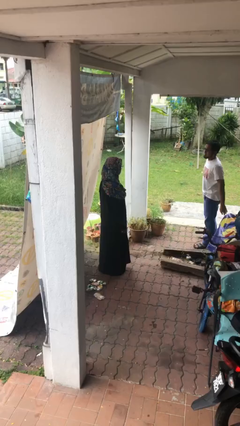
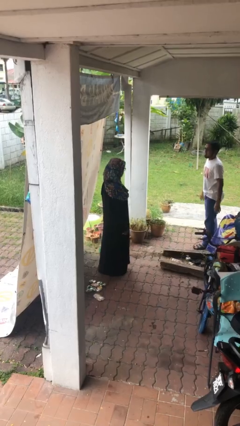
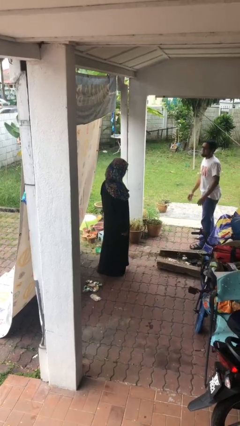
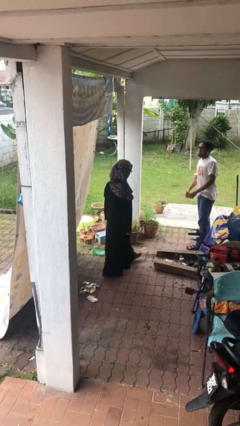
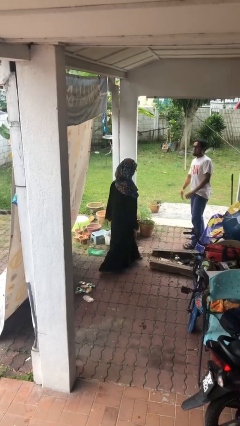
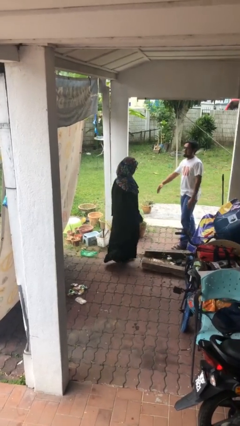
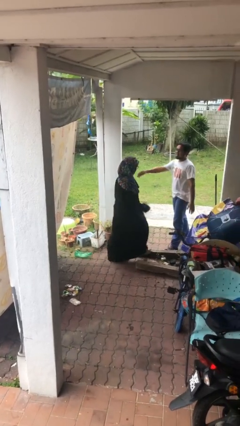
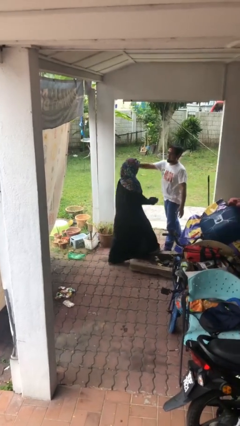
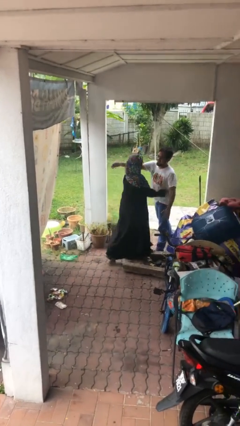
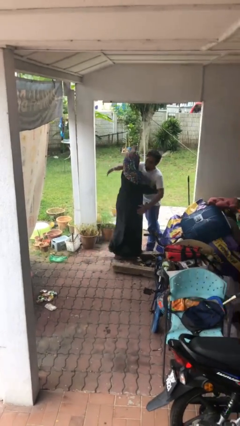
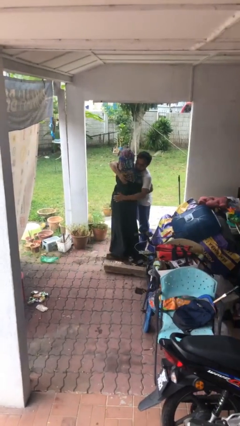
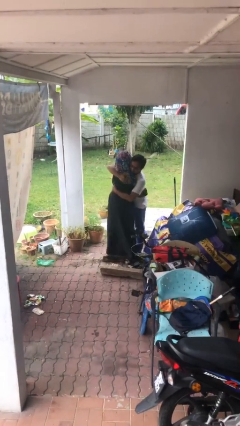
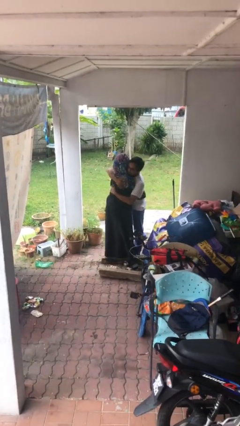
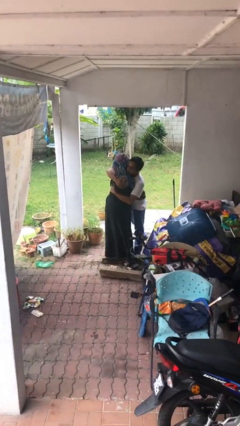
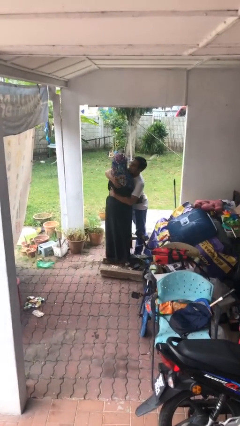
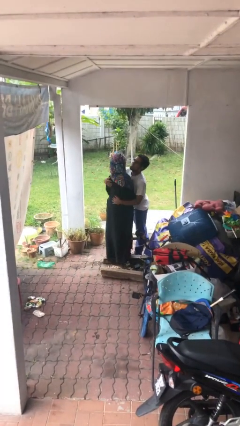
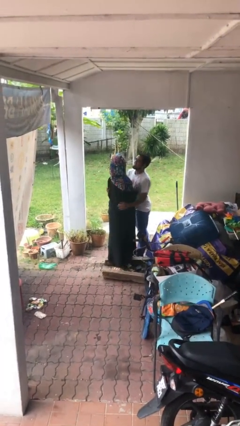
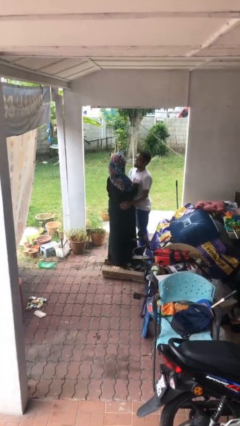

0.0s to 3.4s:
person embraces person

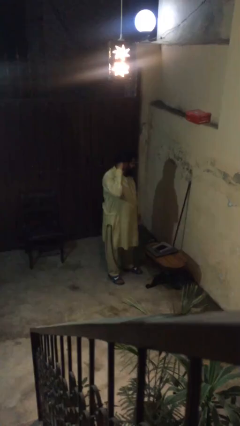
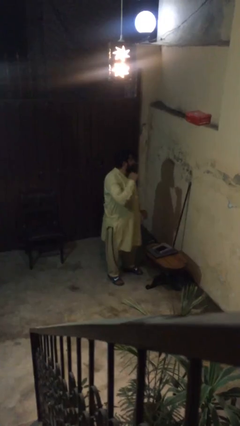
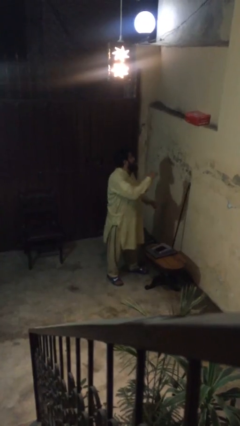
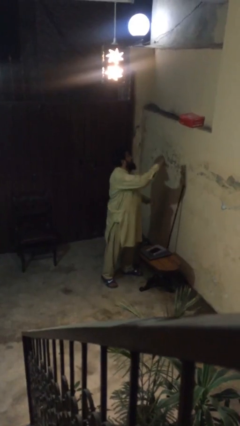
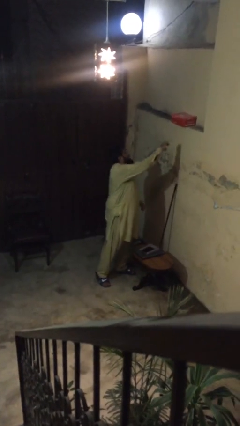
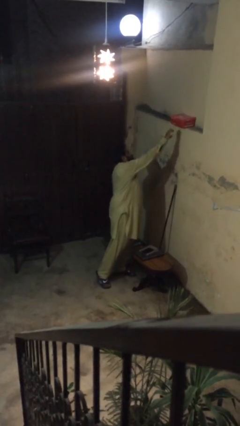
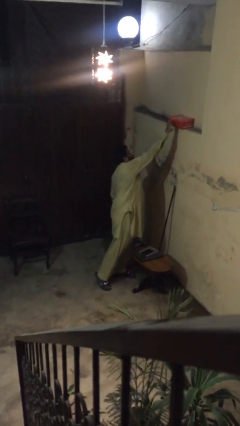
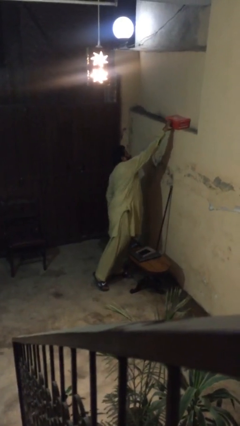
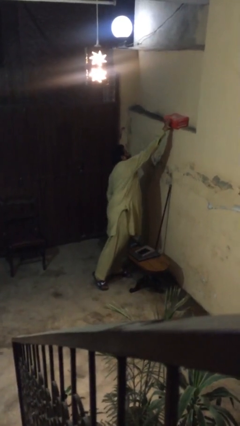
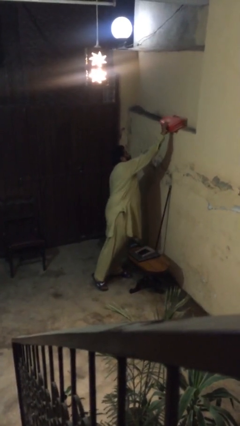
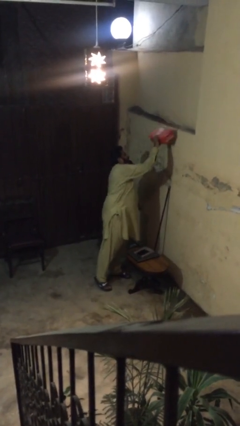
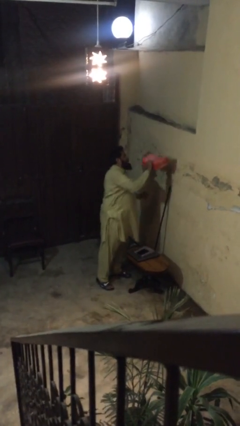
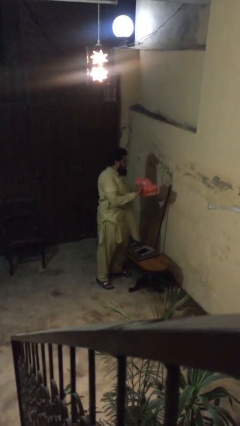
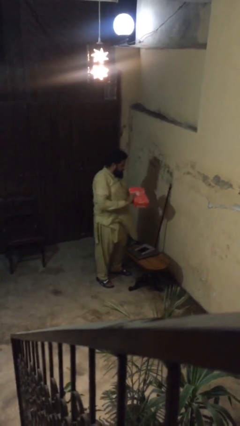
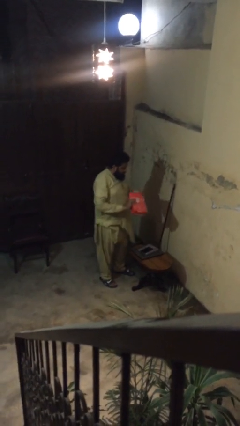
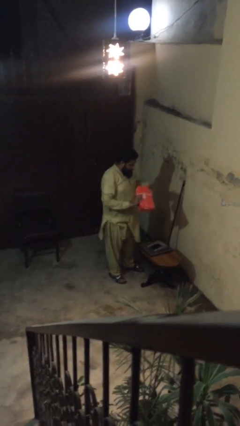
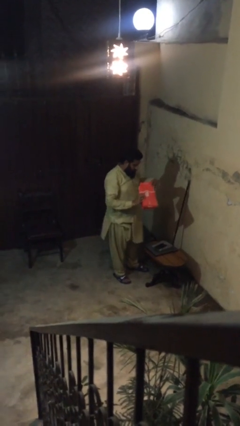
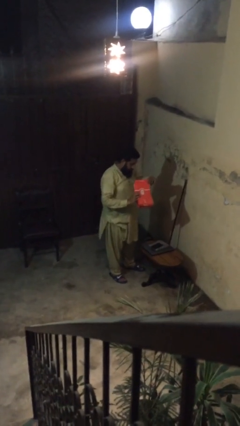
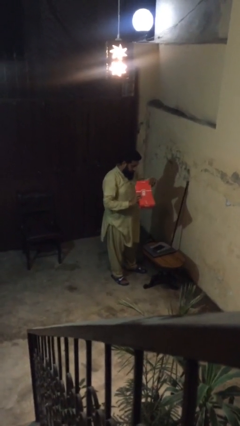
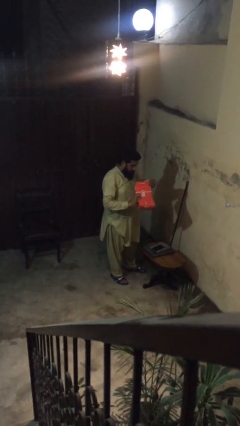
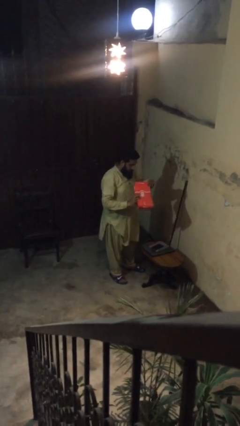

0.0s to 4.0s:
person picks up object from shelf

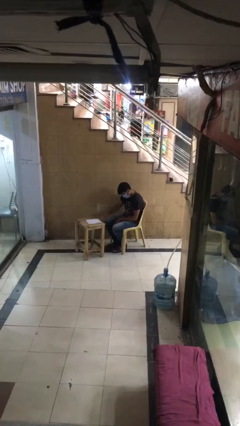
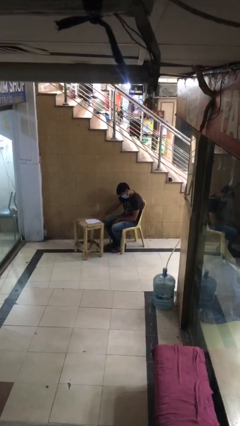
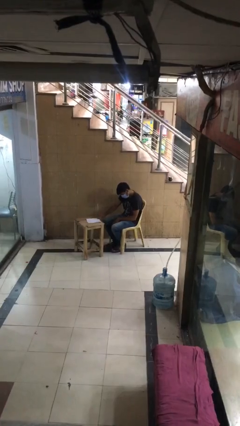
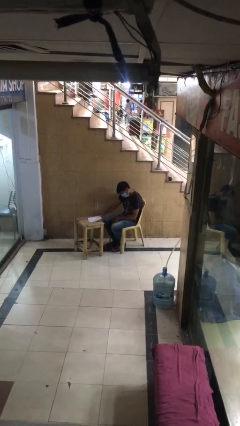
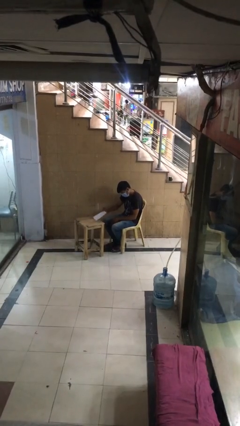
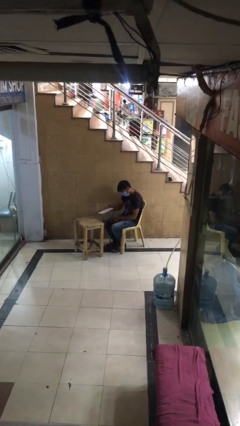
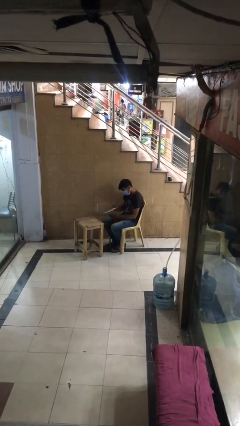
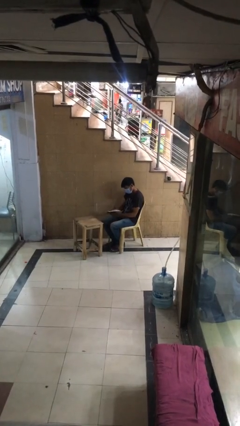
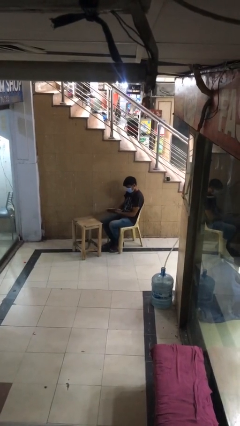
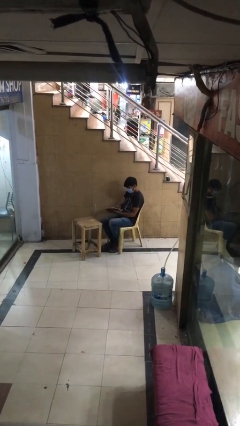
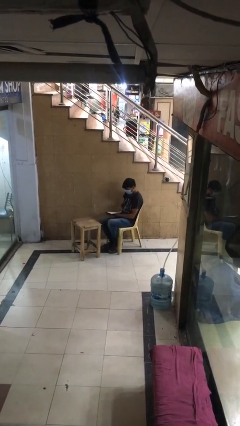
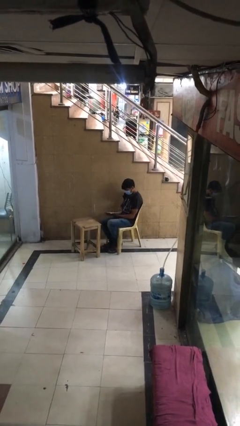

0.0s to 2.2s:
person picks up object from table

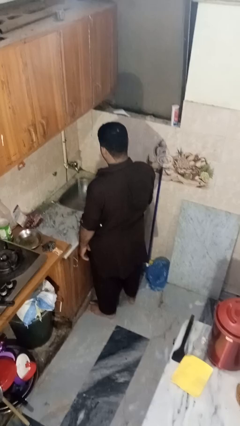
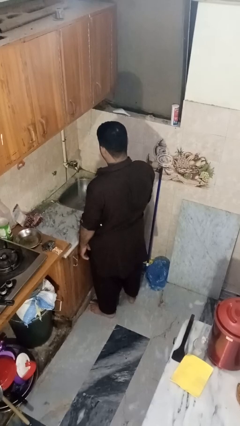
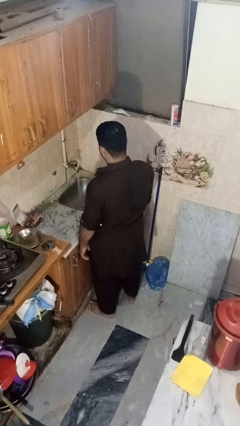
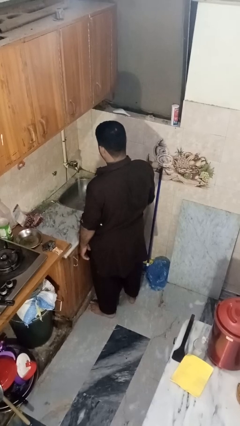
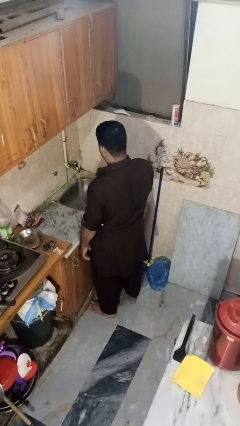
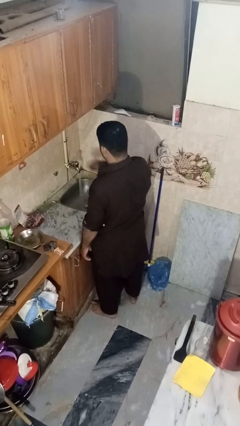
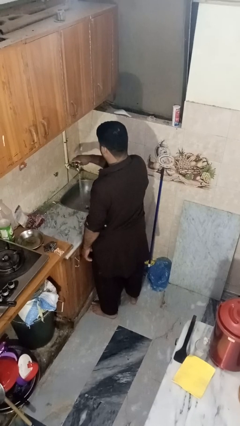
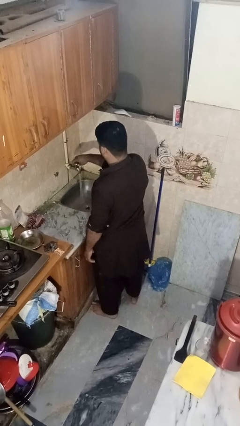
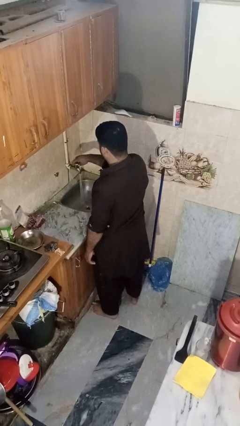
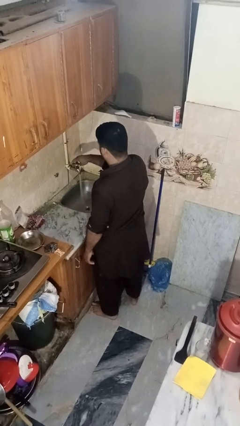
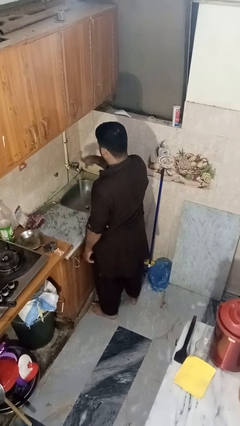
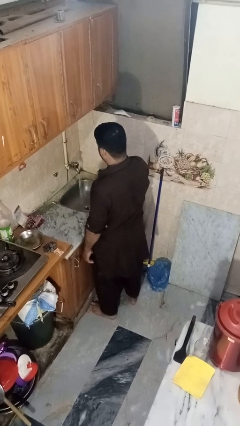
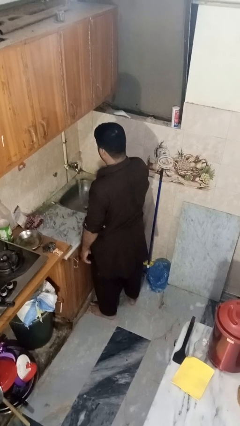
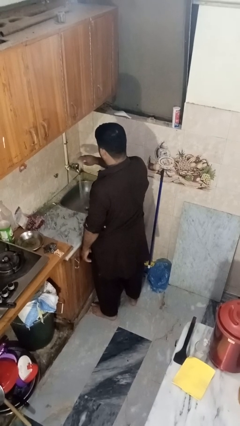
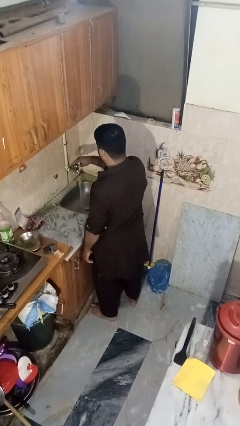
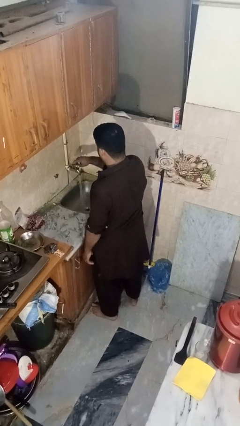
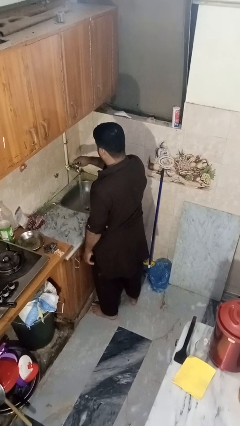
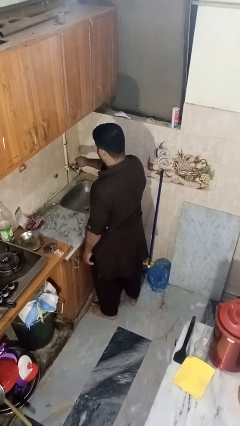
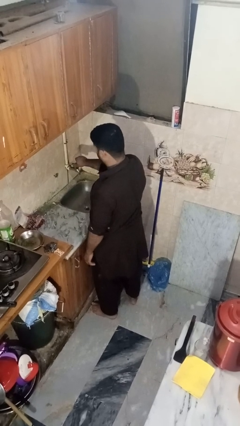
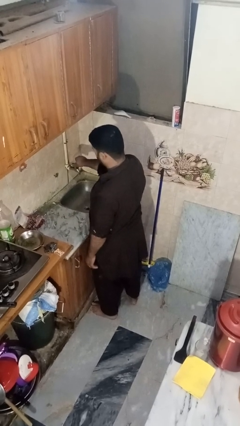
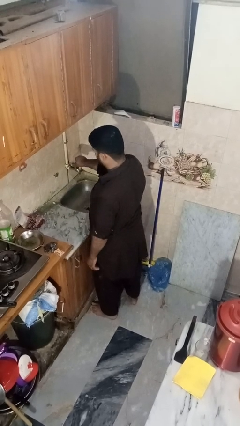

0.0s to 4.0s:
person turns off faucet

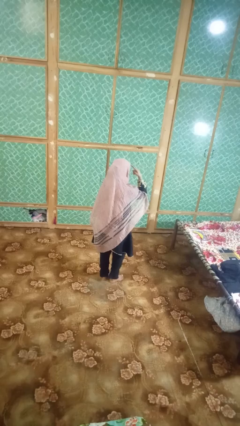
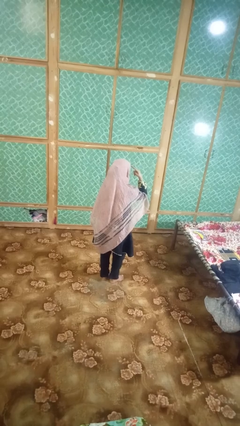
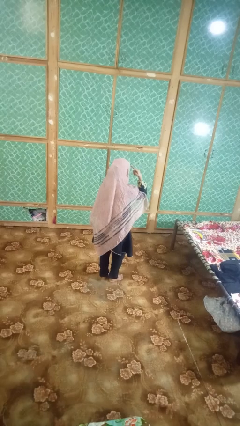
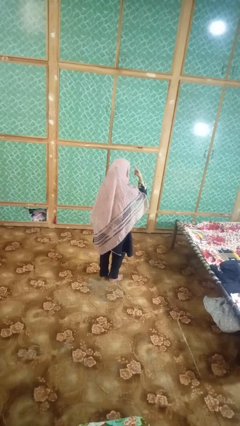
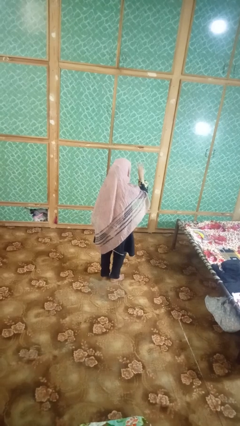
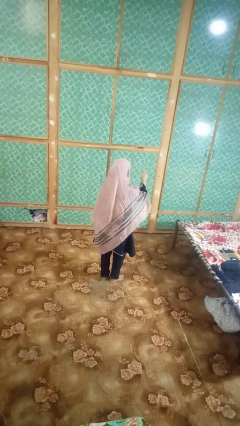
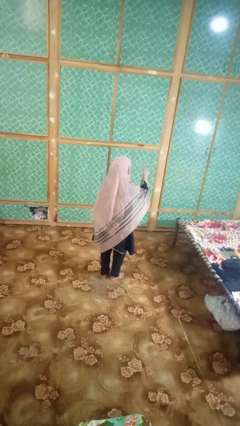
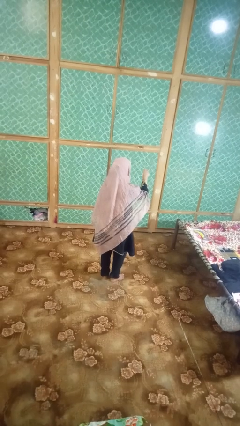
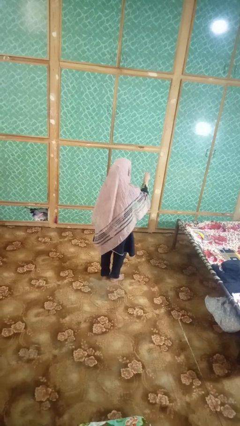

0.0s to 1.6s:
person gestures behind me

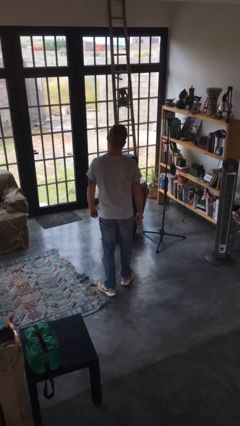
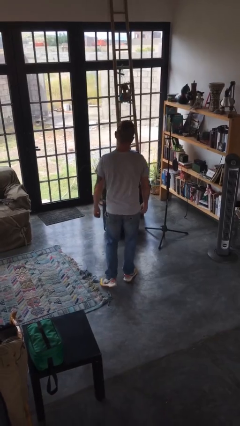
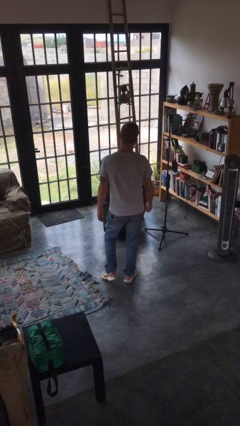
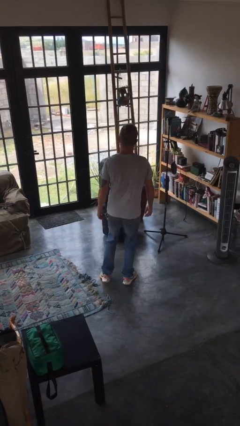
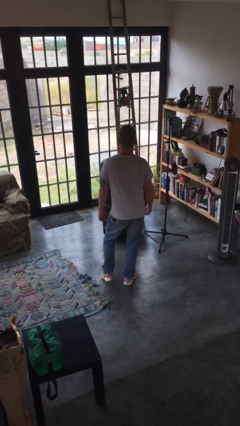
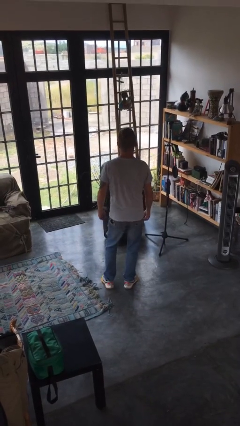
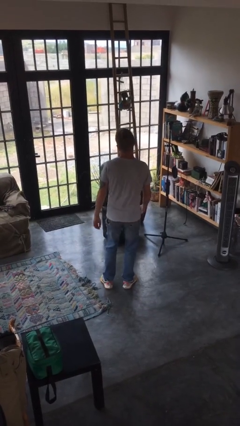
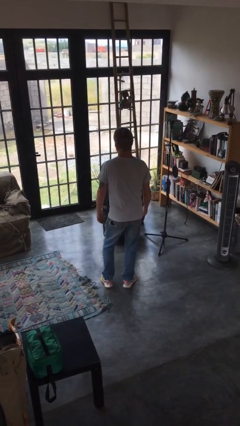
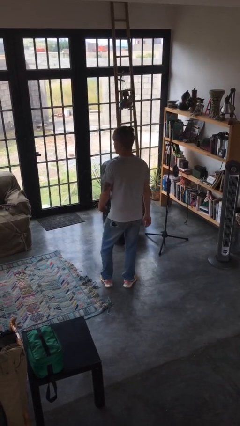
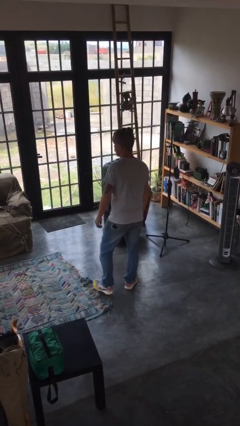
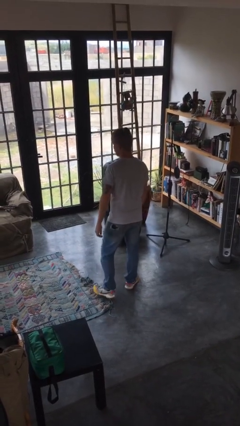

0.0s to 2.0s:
person wiggles hips

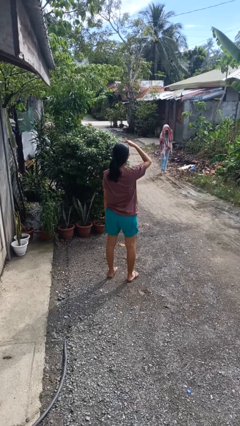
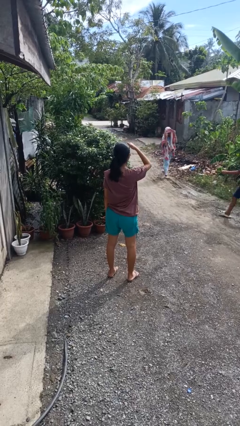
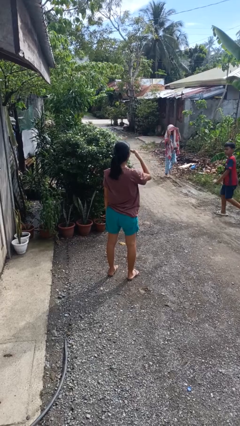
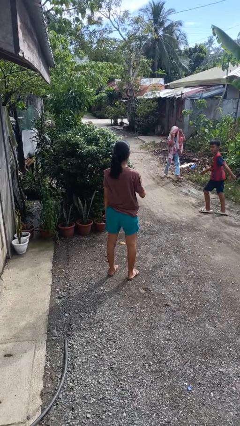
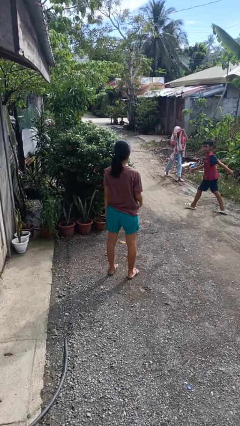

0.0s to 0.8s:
person shades eyes
